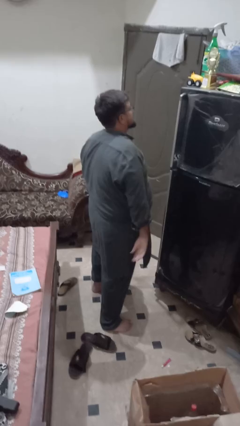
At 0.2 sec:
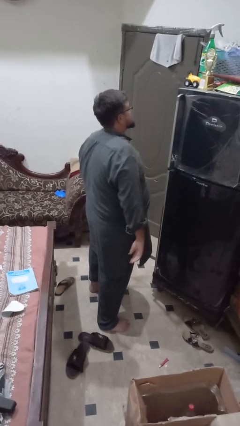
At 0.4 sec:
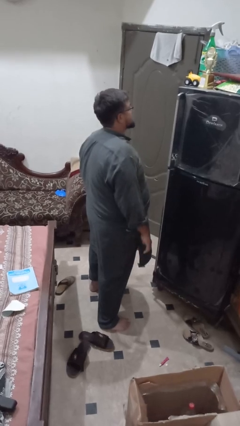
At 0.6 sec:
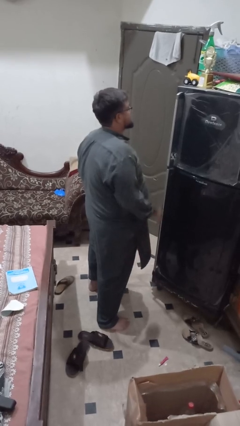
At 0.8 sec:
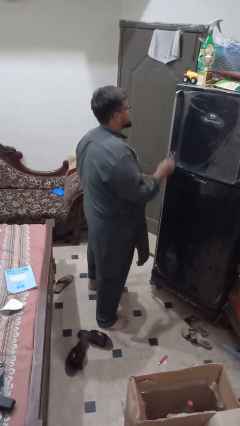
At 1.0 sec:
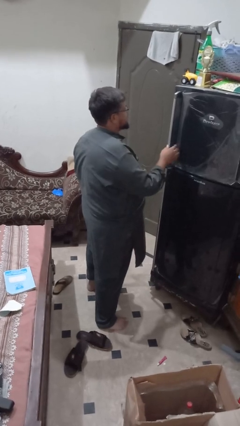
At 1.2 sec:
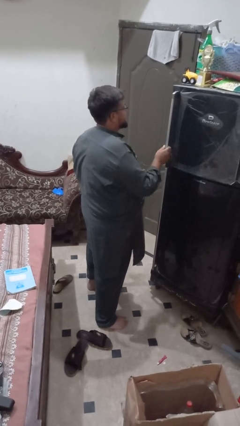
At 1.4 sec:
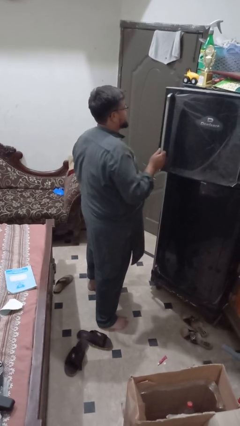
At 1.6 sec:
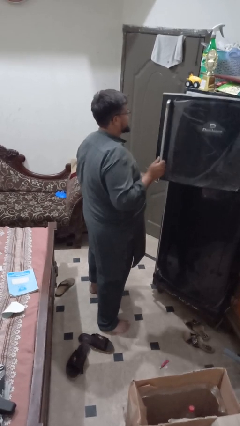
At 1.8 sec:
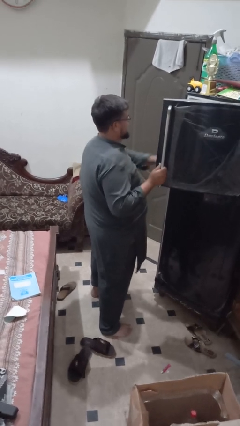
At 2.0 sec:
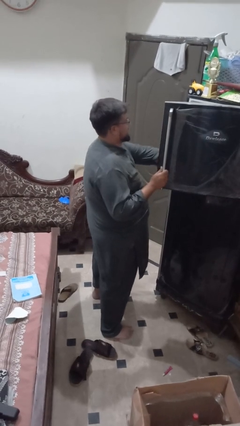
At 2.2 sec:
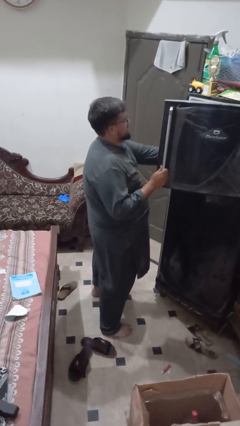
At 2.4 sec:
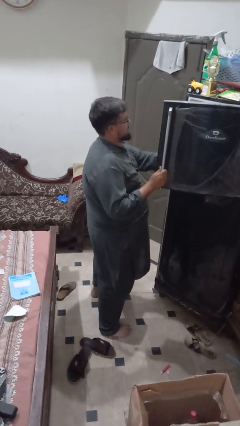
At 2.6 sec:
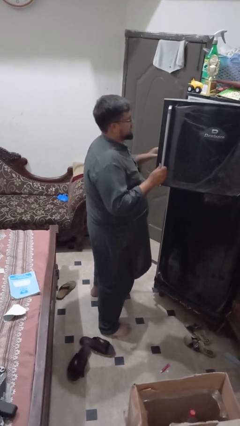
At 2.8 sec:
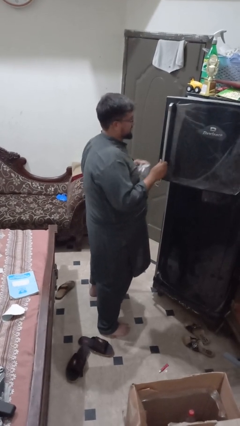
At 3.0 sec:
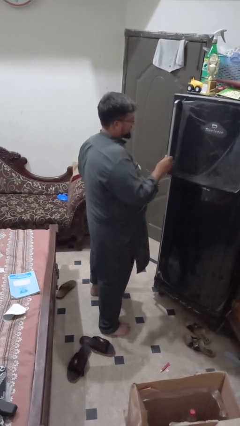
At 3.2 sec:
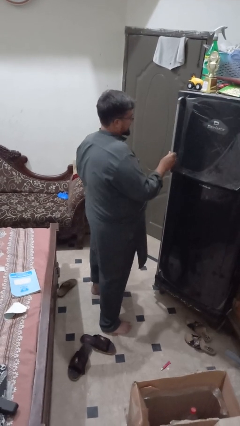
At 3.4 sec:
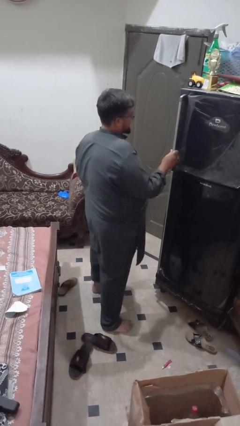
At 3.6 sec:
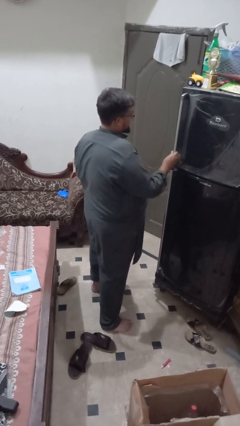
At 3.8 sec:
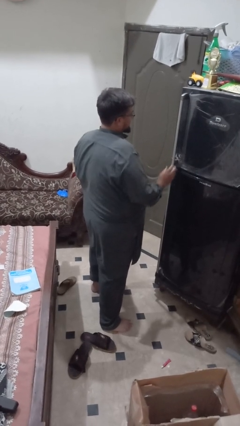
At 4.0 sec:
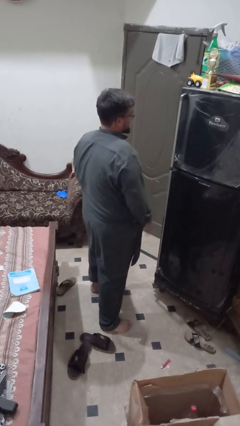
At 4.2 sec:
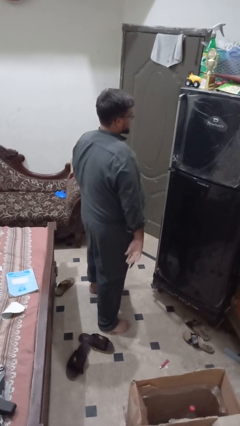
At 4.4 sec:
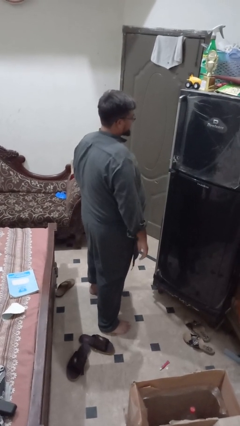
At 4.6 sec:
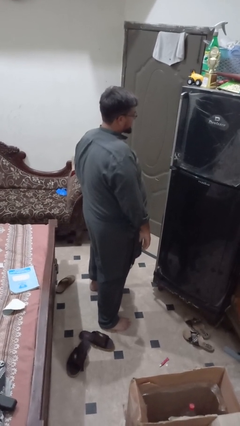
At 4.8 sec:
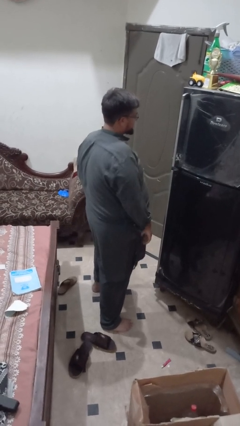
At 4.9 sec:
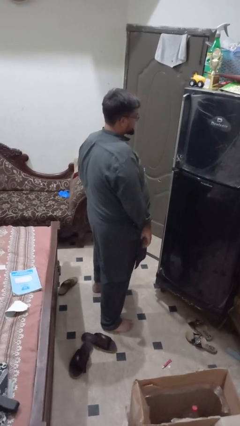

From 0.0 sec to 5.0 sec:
person takes object from refrigerator

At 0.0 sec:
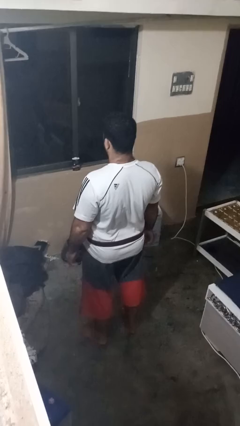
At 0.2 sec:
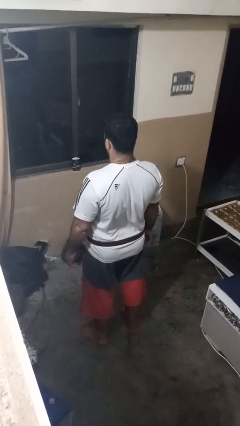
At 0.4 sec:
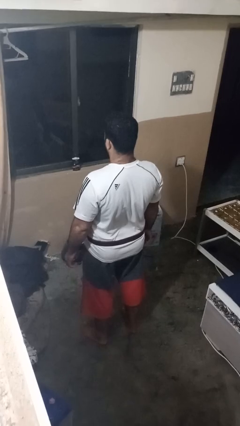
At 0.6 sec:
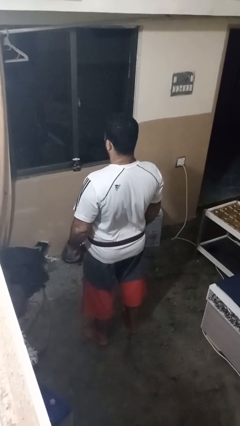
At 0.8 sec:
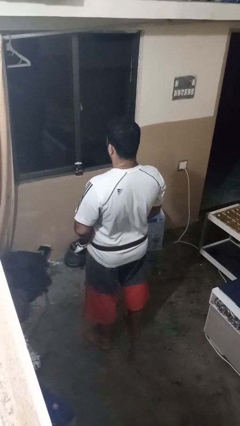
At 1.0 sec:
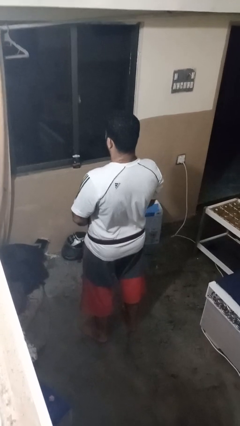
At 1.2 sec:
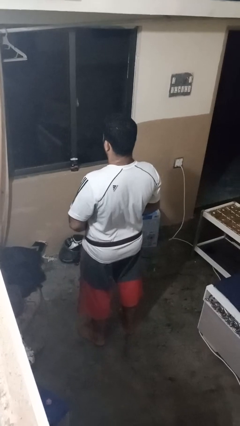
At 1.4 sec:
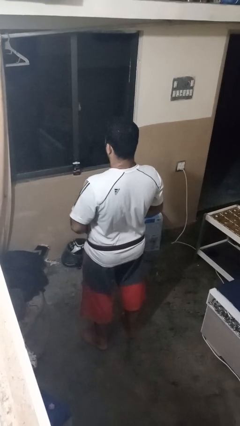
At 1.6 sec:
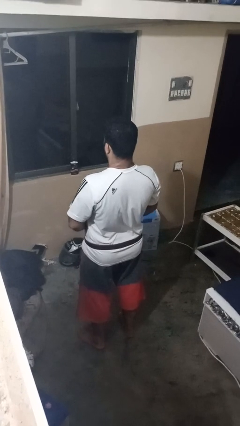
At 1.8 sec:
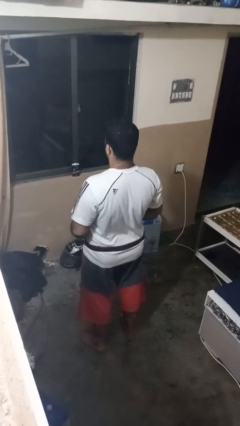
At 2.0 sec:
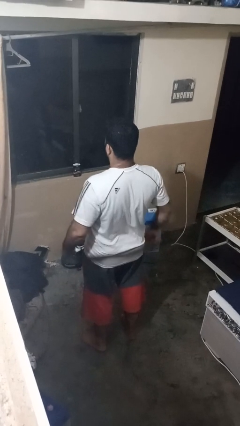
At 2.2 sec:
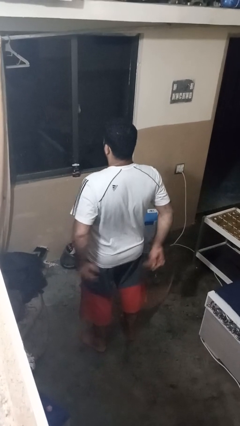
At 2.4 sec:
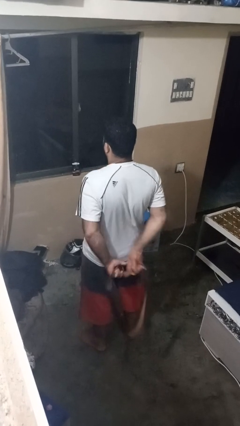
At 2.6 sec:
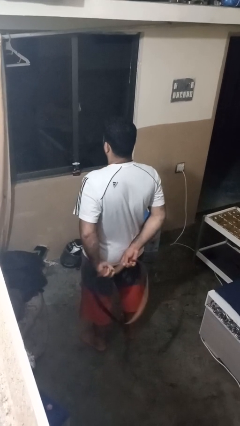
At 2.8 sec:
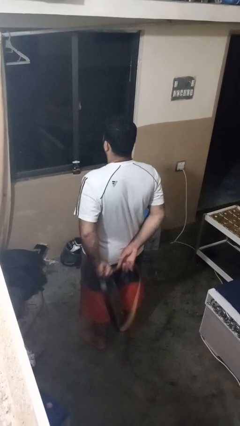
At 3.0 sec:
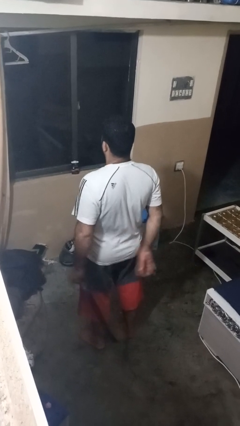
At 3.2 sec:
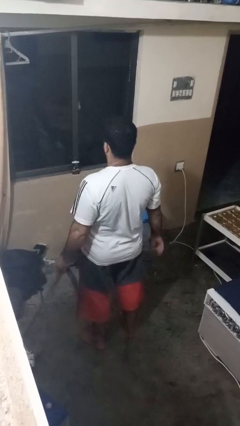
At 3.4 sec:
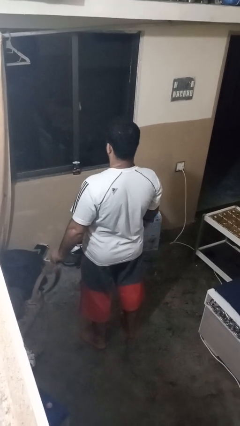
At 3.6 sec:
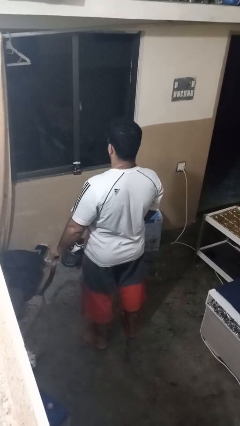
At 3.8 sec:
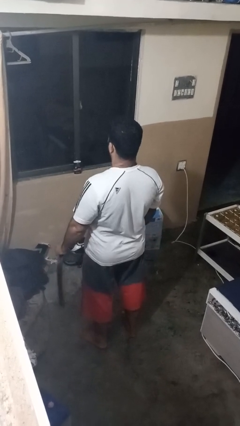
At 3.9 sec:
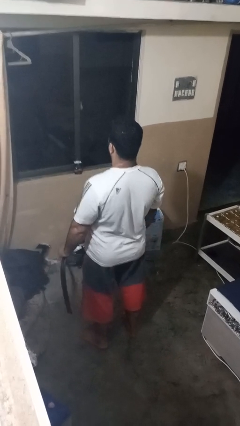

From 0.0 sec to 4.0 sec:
person takes off belt

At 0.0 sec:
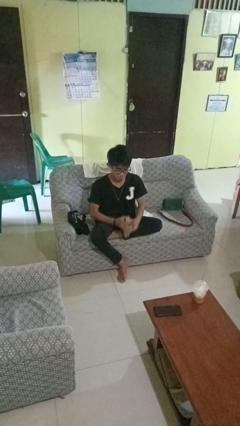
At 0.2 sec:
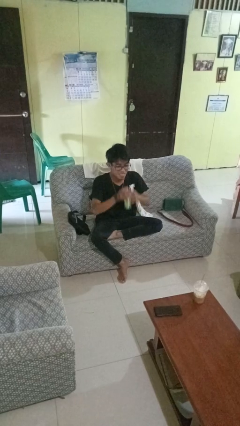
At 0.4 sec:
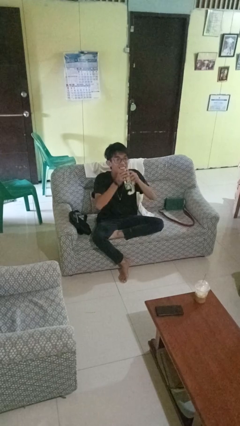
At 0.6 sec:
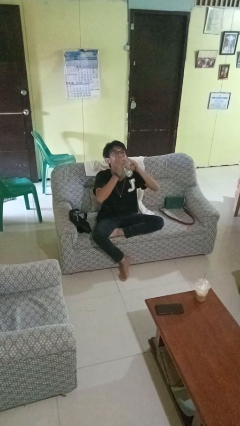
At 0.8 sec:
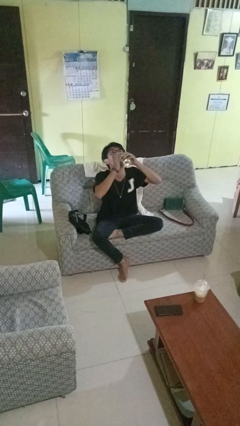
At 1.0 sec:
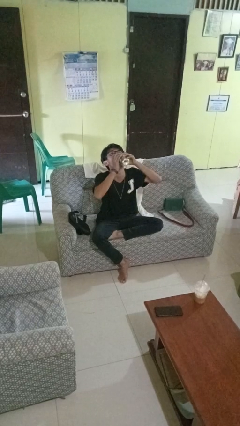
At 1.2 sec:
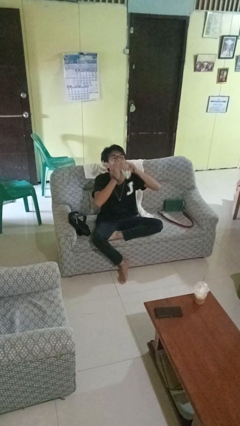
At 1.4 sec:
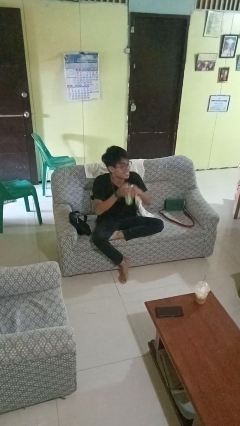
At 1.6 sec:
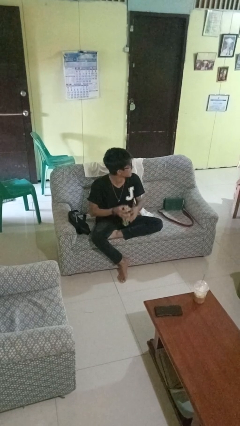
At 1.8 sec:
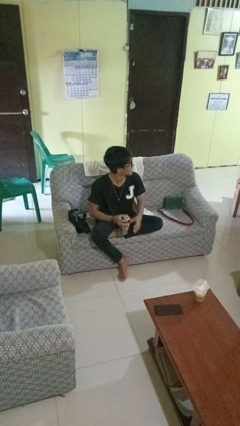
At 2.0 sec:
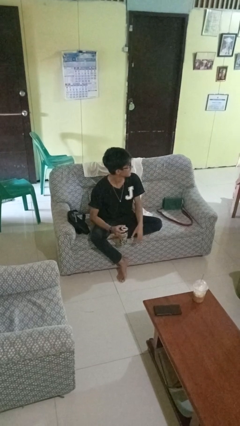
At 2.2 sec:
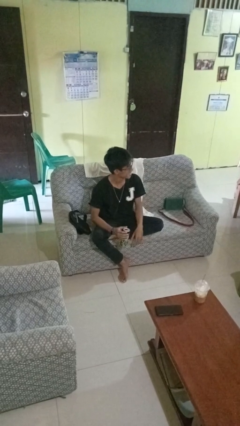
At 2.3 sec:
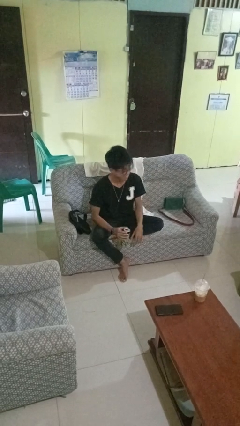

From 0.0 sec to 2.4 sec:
person drinks from beverage can

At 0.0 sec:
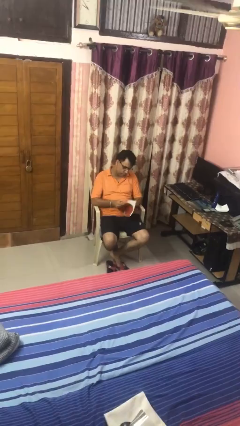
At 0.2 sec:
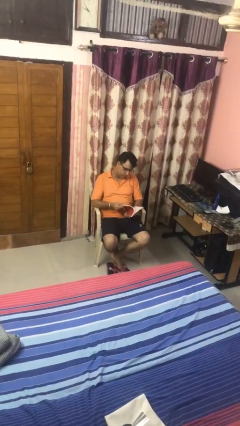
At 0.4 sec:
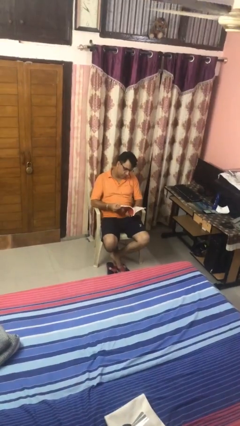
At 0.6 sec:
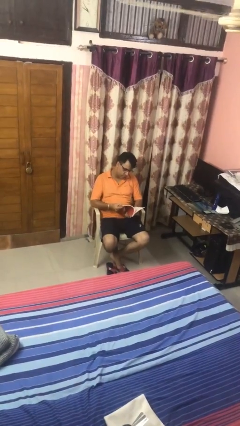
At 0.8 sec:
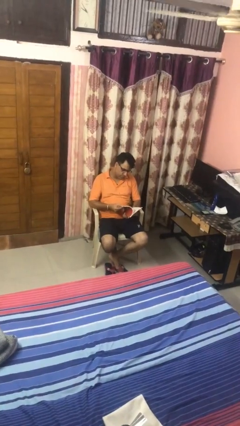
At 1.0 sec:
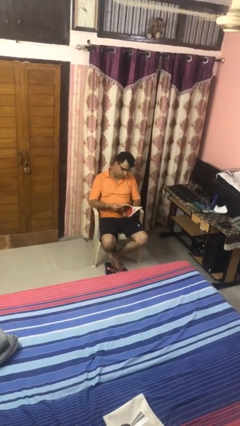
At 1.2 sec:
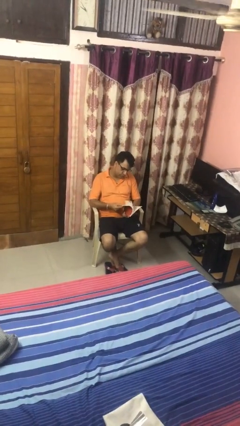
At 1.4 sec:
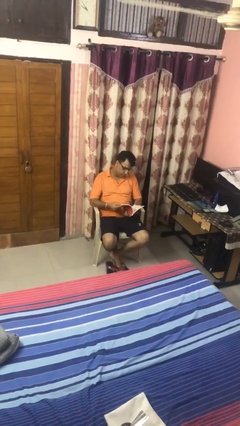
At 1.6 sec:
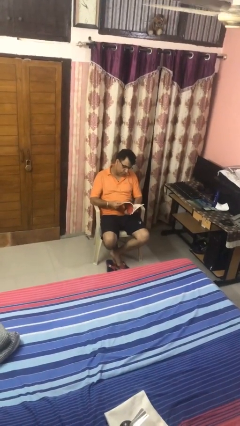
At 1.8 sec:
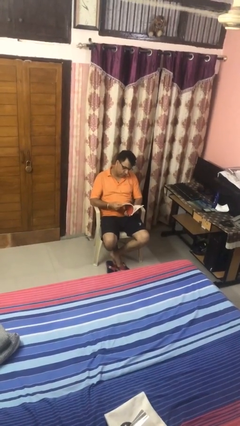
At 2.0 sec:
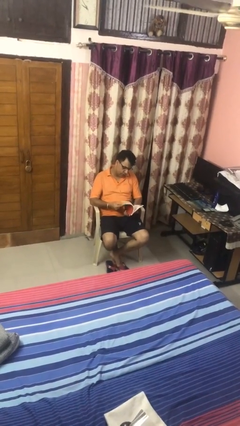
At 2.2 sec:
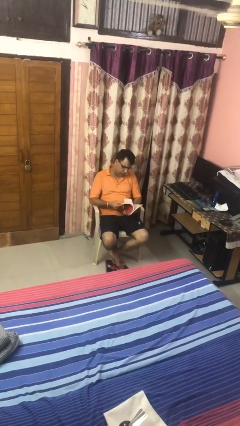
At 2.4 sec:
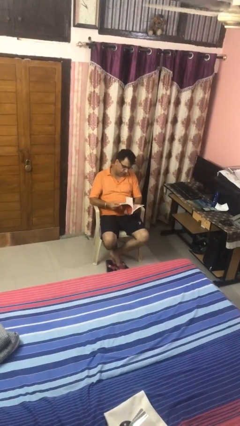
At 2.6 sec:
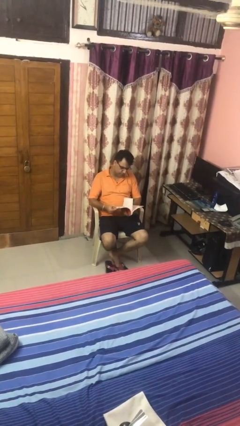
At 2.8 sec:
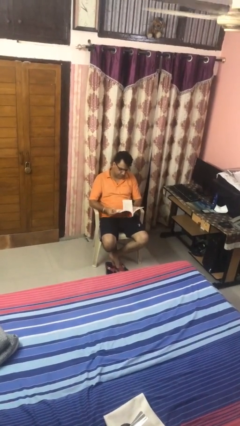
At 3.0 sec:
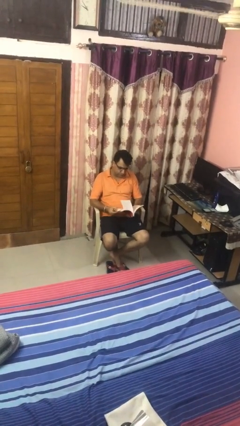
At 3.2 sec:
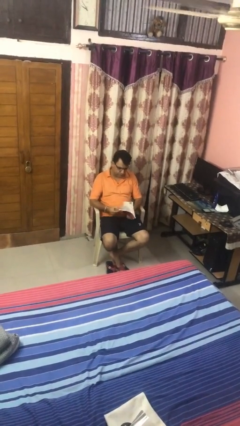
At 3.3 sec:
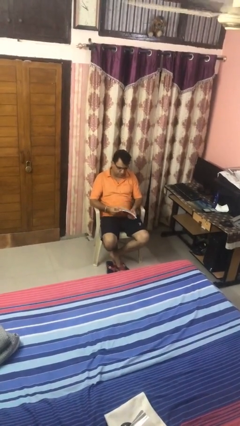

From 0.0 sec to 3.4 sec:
person reads magazine

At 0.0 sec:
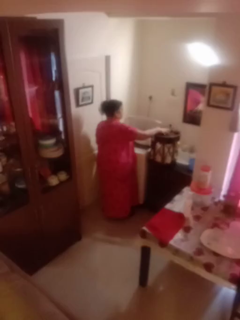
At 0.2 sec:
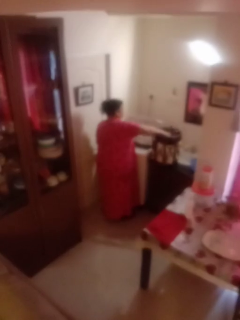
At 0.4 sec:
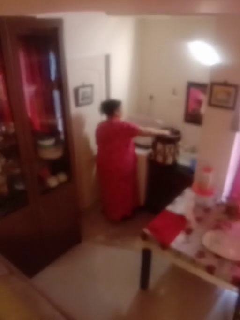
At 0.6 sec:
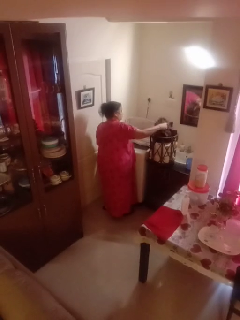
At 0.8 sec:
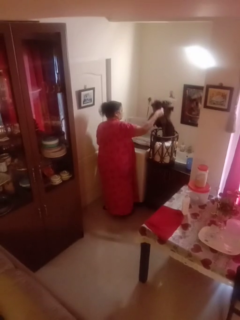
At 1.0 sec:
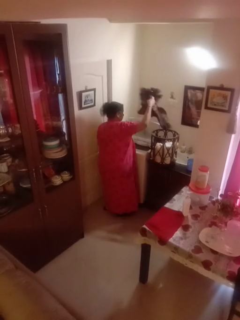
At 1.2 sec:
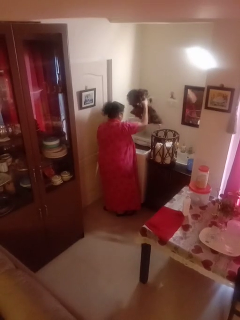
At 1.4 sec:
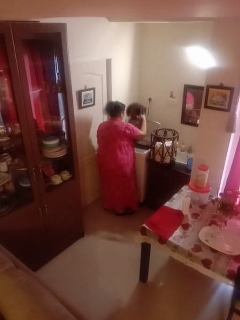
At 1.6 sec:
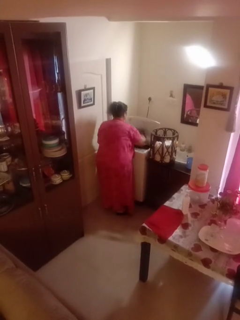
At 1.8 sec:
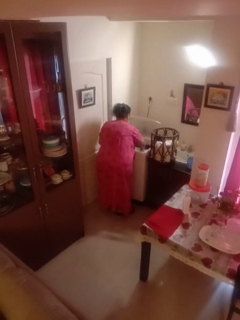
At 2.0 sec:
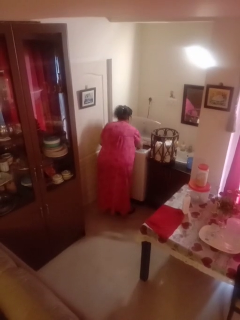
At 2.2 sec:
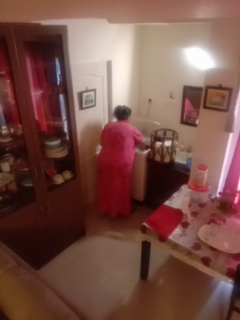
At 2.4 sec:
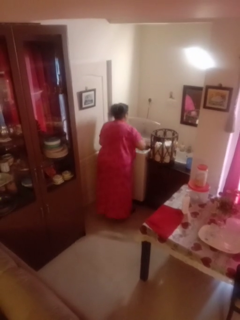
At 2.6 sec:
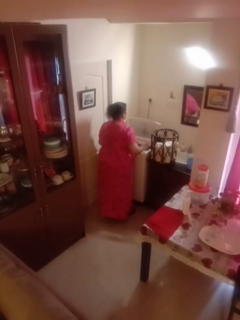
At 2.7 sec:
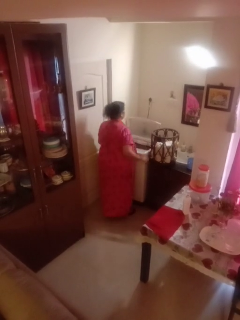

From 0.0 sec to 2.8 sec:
person loads dryer
